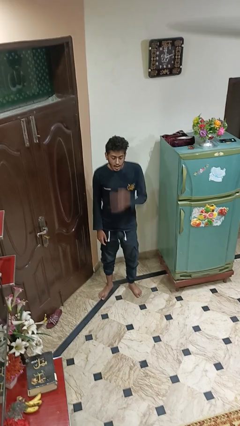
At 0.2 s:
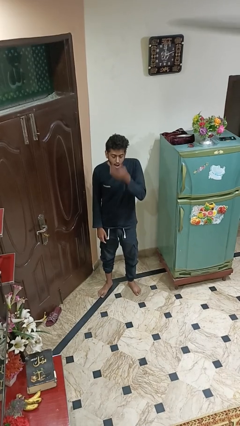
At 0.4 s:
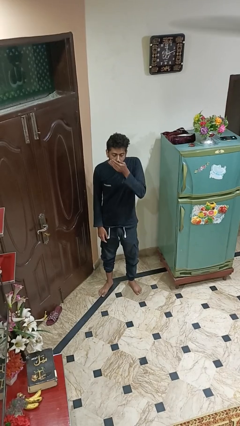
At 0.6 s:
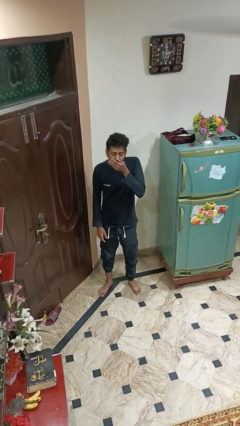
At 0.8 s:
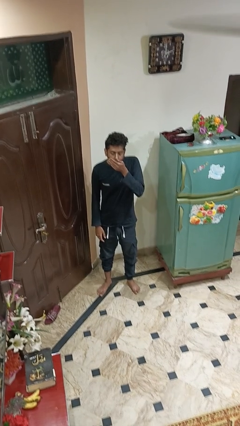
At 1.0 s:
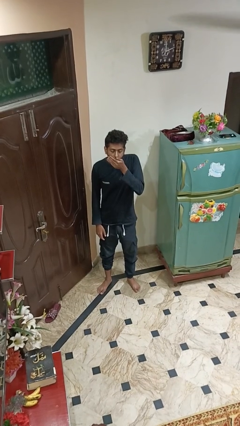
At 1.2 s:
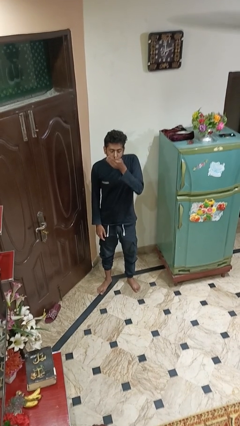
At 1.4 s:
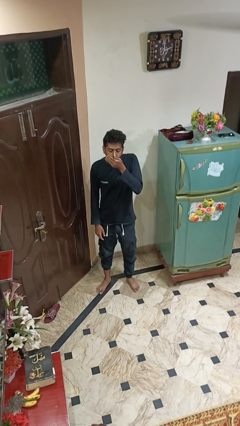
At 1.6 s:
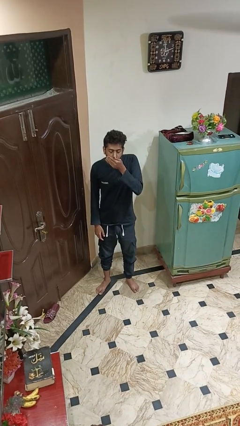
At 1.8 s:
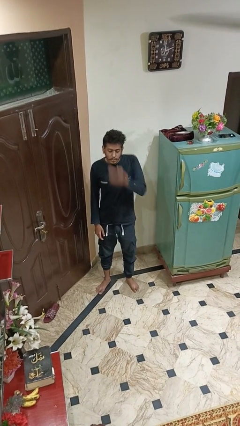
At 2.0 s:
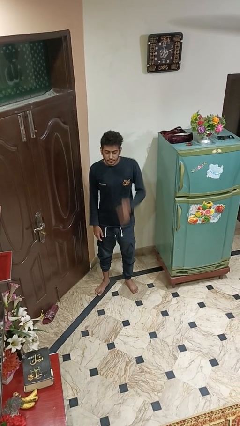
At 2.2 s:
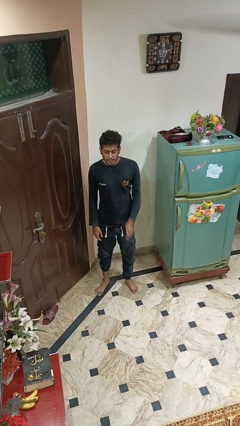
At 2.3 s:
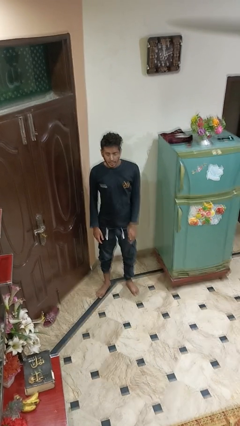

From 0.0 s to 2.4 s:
person yawns

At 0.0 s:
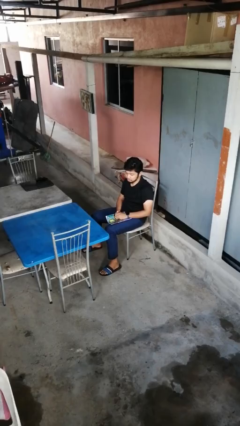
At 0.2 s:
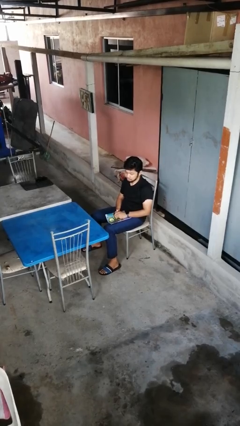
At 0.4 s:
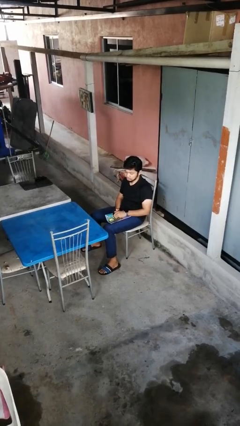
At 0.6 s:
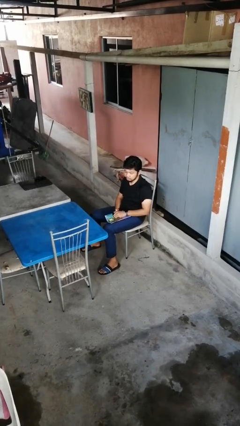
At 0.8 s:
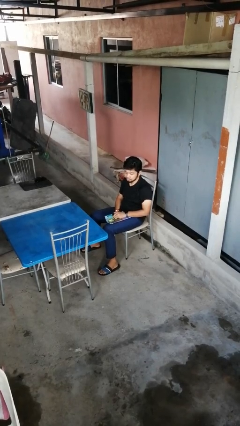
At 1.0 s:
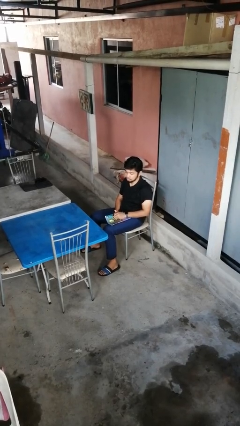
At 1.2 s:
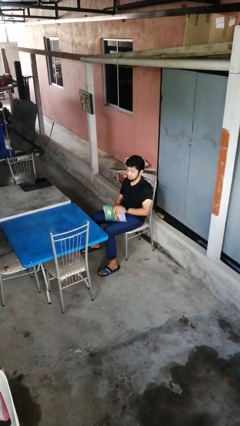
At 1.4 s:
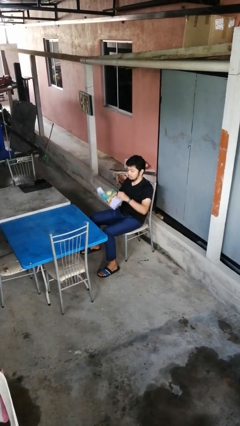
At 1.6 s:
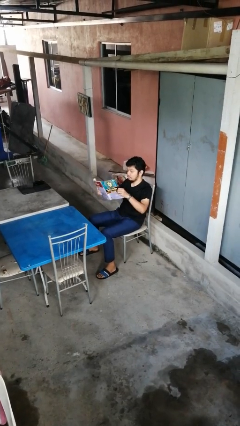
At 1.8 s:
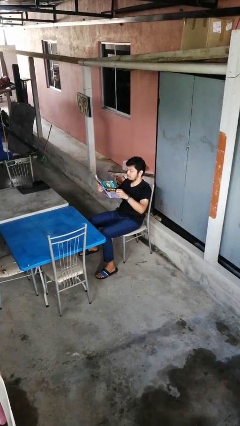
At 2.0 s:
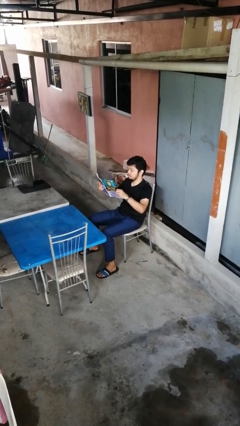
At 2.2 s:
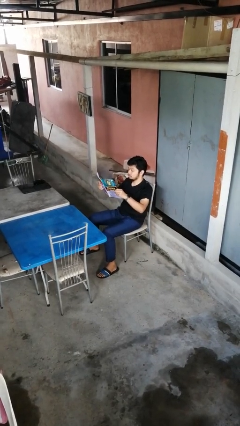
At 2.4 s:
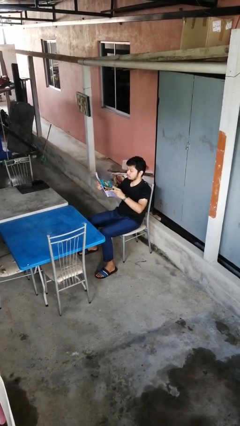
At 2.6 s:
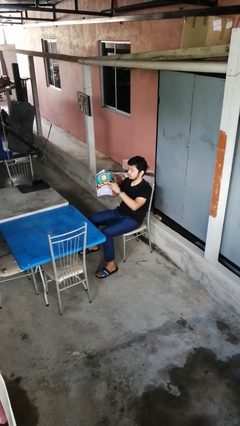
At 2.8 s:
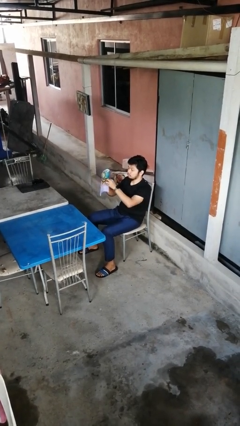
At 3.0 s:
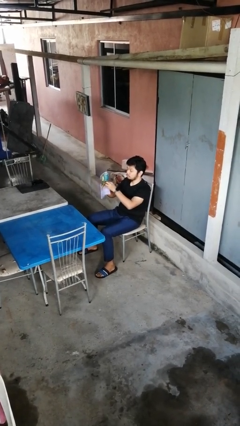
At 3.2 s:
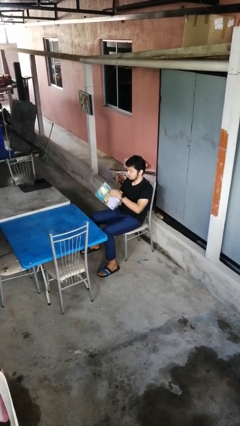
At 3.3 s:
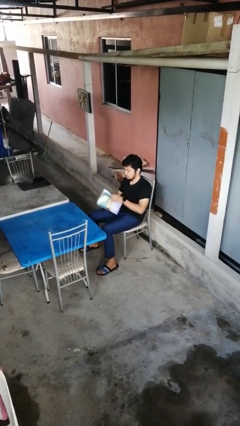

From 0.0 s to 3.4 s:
person reads magazine

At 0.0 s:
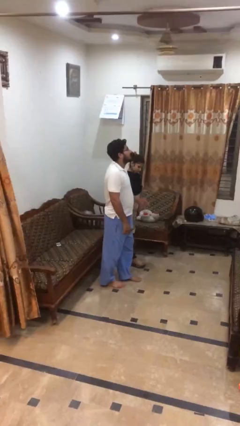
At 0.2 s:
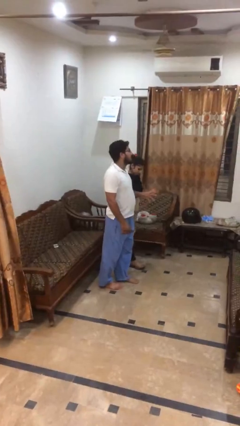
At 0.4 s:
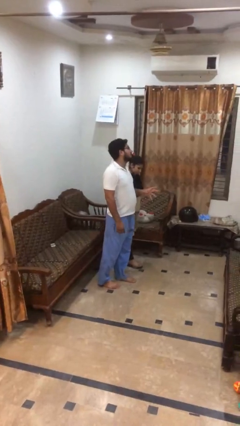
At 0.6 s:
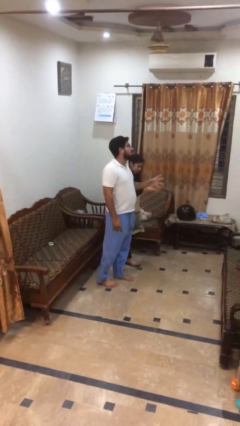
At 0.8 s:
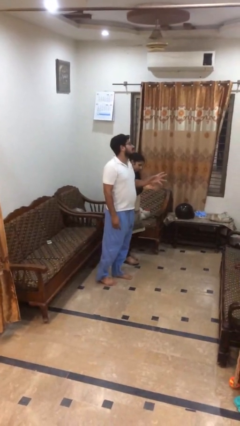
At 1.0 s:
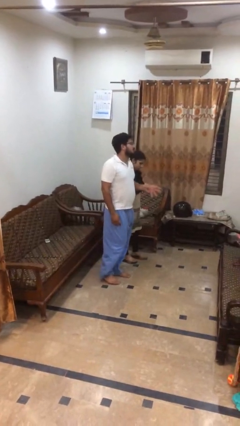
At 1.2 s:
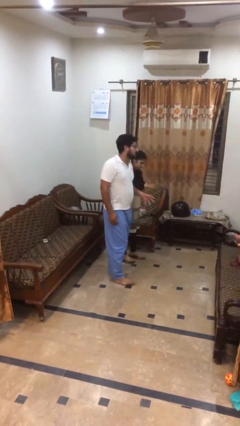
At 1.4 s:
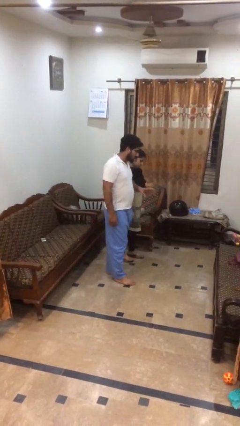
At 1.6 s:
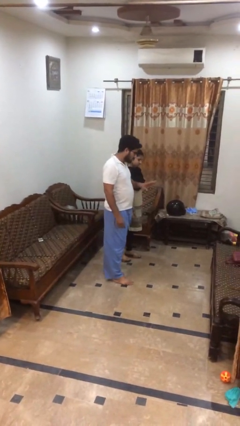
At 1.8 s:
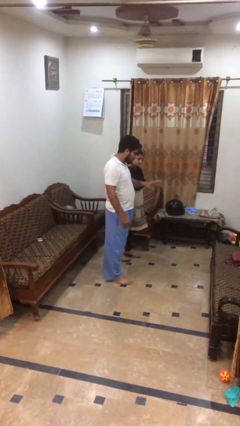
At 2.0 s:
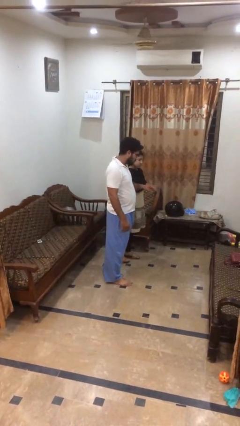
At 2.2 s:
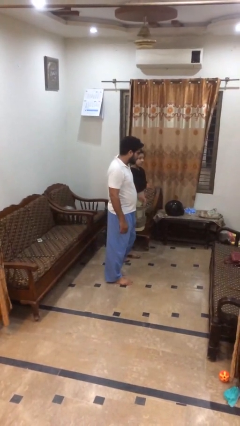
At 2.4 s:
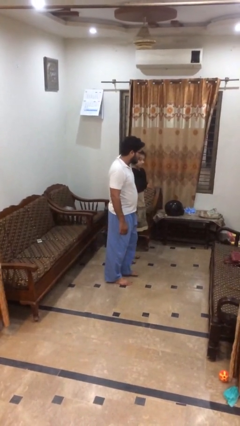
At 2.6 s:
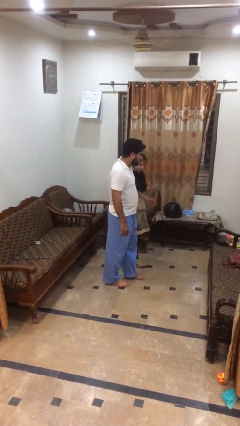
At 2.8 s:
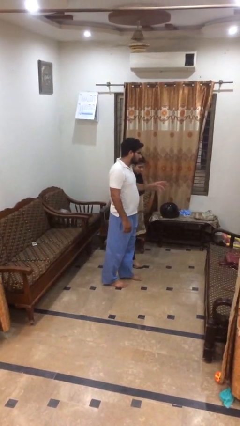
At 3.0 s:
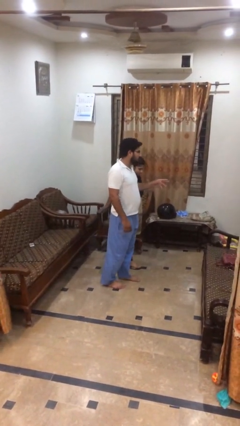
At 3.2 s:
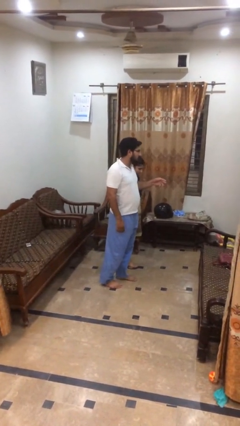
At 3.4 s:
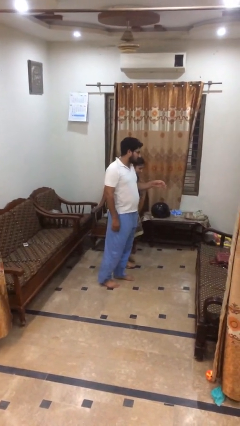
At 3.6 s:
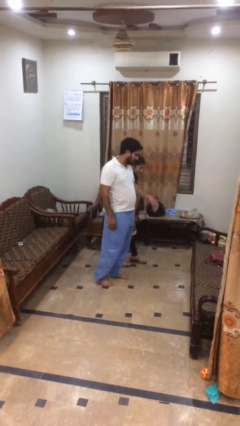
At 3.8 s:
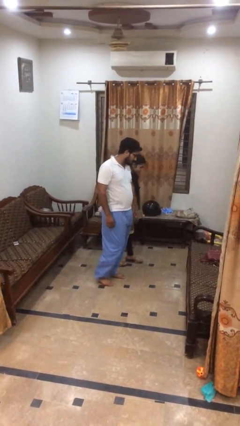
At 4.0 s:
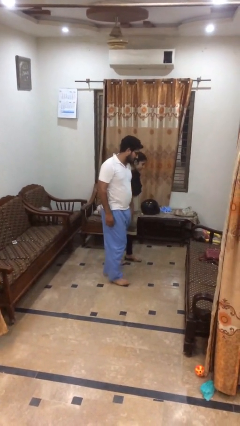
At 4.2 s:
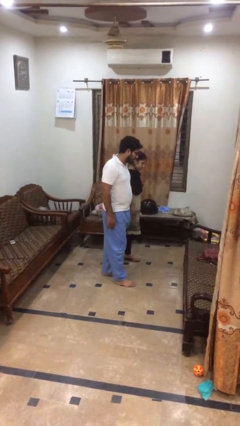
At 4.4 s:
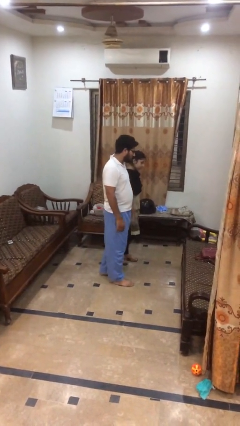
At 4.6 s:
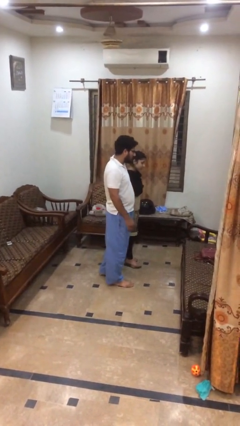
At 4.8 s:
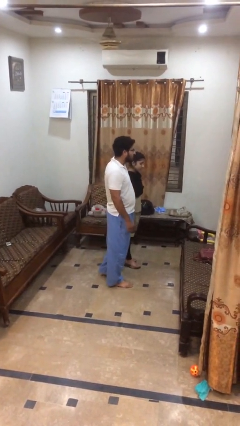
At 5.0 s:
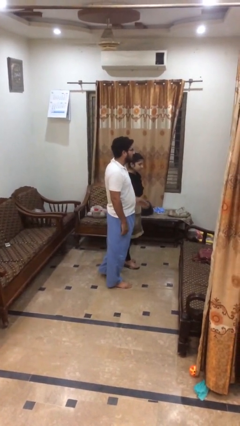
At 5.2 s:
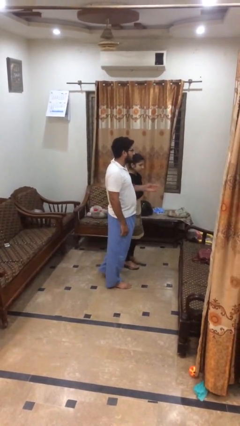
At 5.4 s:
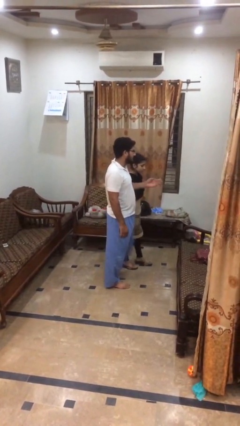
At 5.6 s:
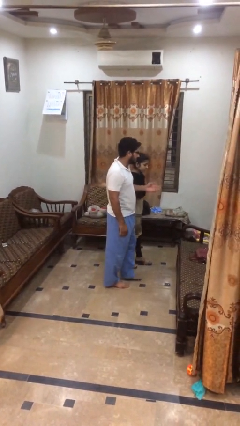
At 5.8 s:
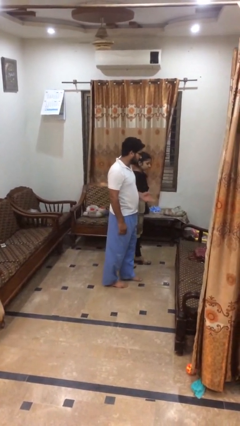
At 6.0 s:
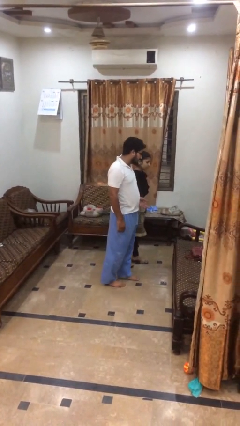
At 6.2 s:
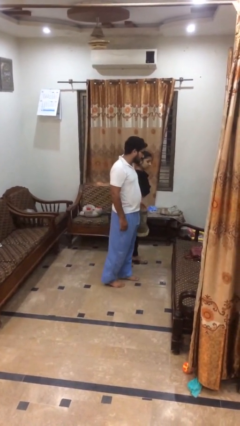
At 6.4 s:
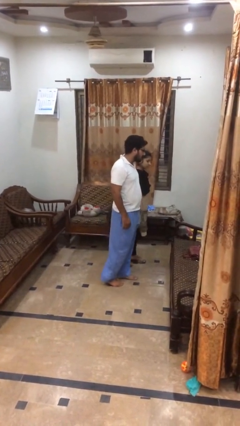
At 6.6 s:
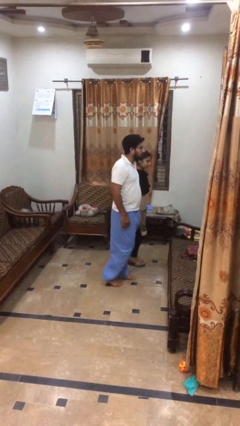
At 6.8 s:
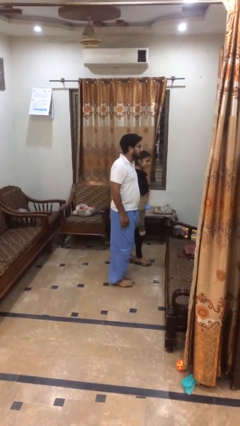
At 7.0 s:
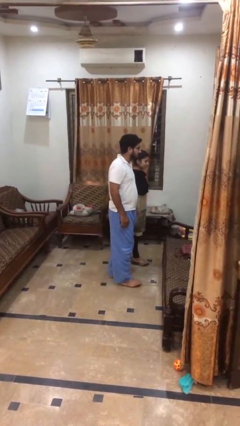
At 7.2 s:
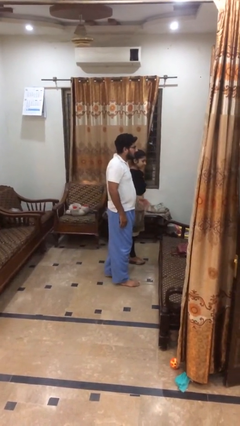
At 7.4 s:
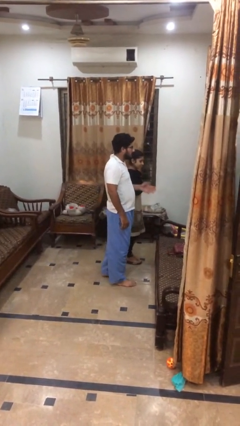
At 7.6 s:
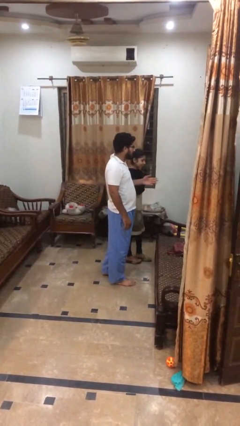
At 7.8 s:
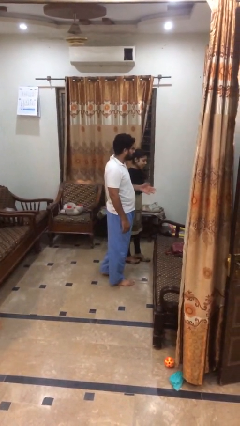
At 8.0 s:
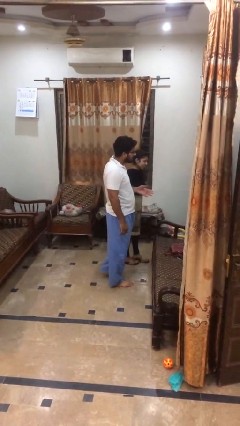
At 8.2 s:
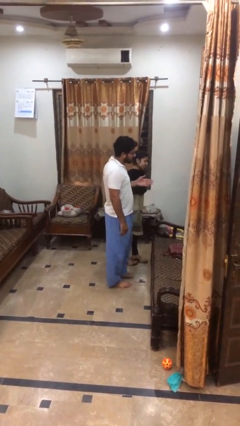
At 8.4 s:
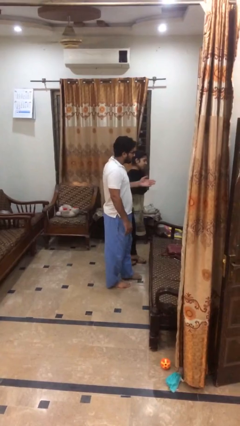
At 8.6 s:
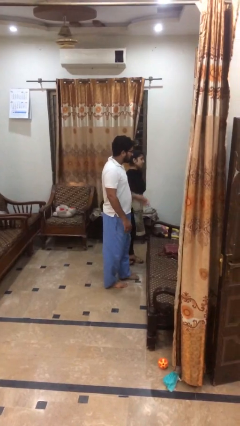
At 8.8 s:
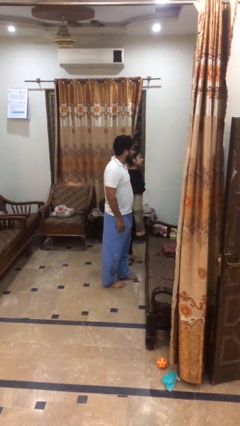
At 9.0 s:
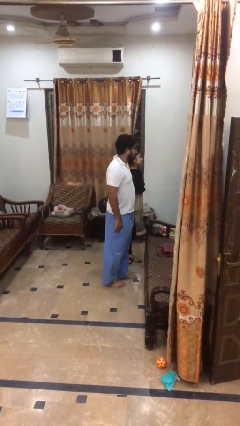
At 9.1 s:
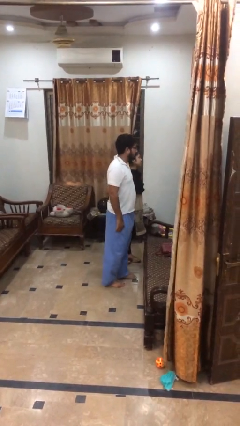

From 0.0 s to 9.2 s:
person talks to person

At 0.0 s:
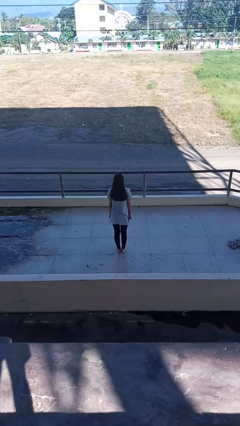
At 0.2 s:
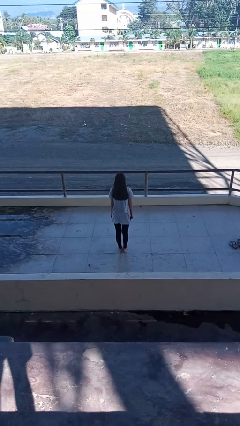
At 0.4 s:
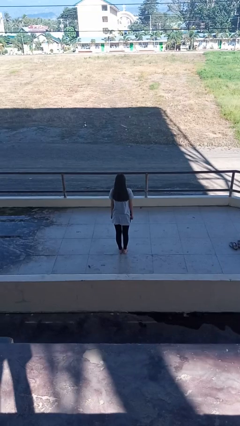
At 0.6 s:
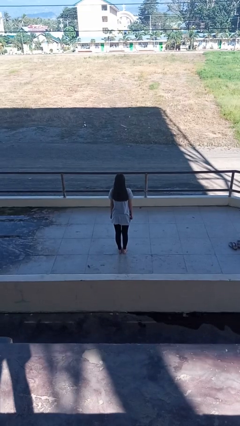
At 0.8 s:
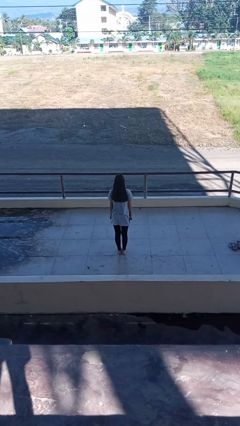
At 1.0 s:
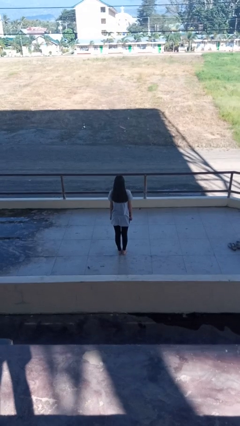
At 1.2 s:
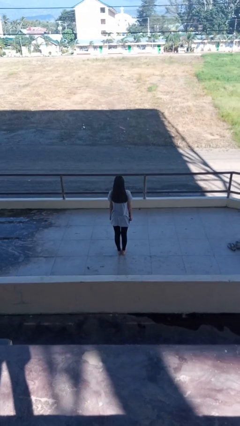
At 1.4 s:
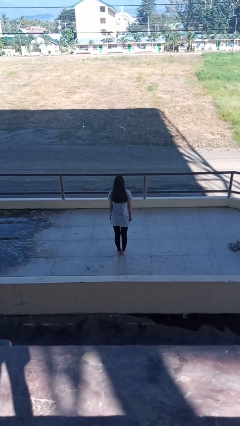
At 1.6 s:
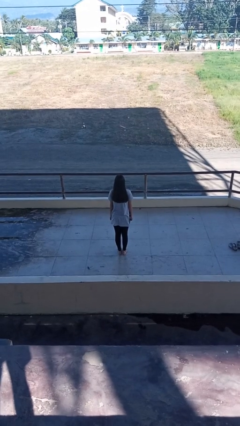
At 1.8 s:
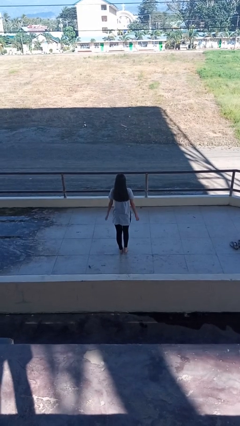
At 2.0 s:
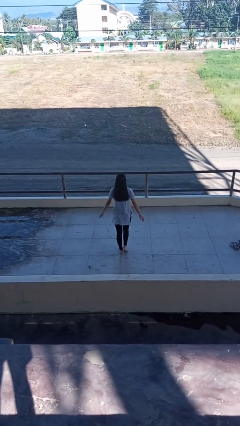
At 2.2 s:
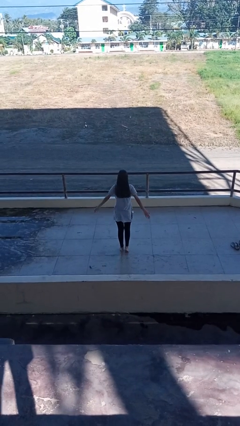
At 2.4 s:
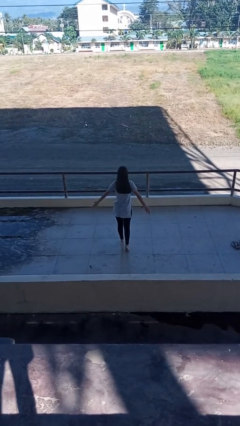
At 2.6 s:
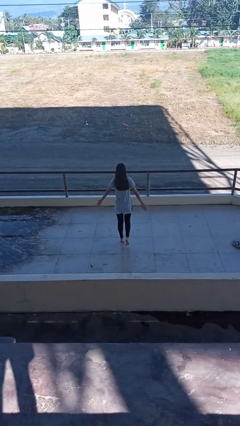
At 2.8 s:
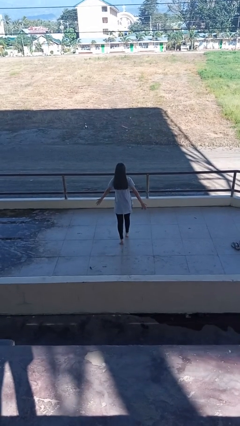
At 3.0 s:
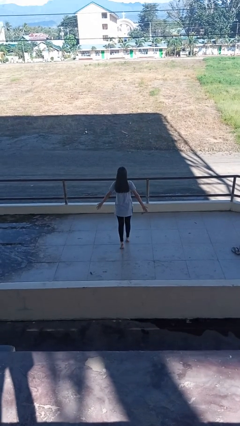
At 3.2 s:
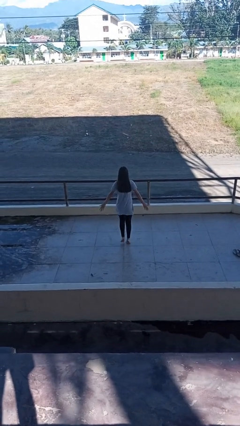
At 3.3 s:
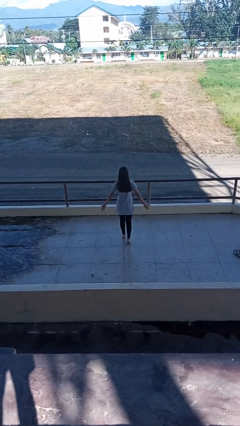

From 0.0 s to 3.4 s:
person walks tiptoe
